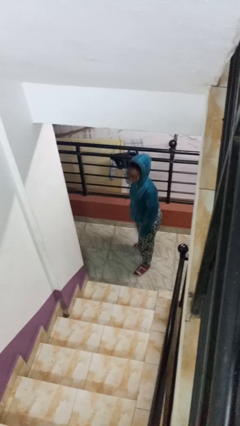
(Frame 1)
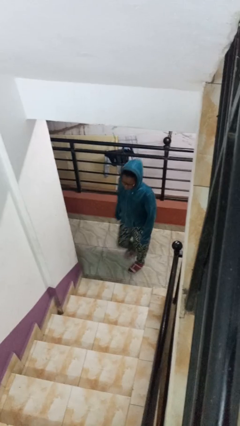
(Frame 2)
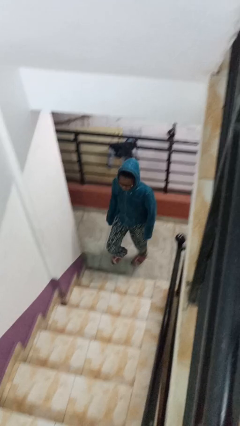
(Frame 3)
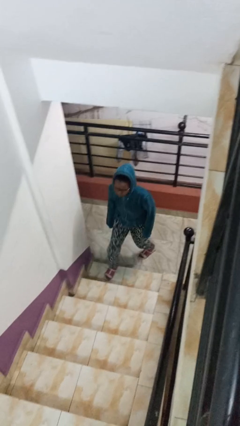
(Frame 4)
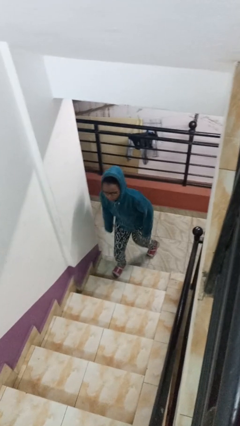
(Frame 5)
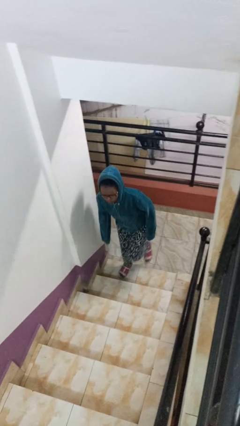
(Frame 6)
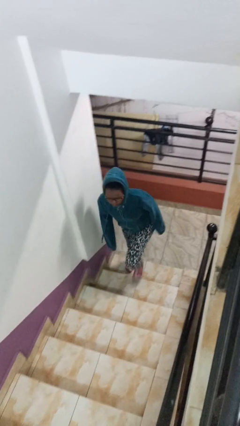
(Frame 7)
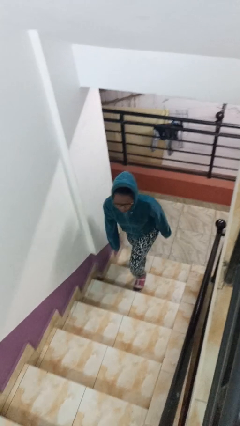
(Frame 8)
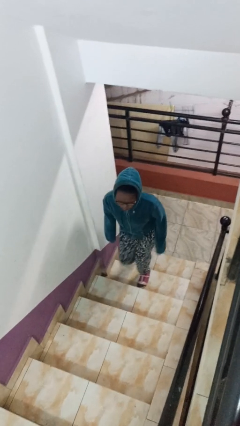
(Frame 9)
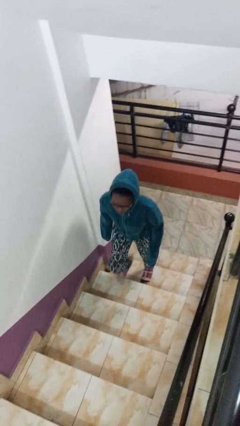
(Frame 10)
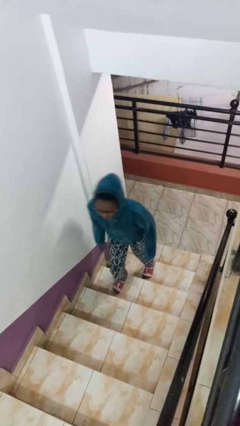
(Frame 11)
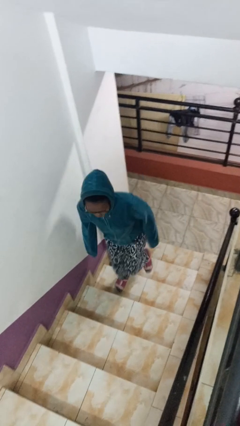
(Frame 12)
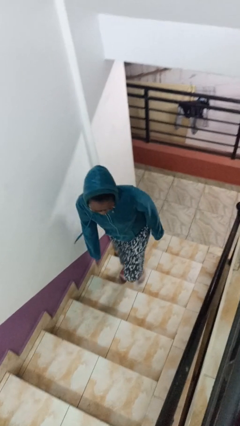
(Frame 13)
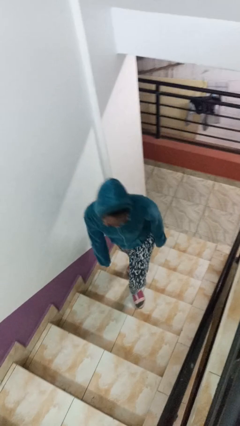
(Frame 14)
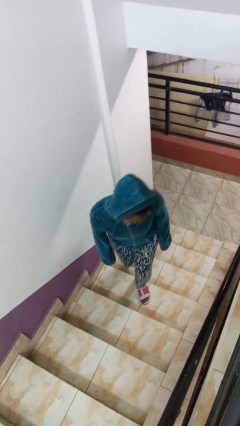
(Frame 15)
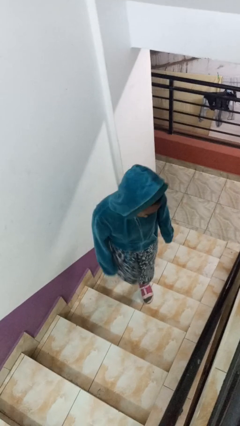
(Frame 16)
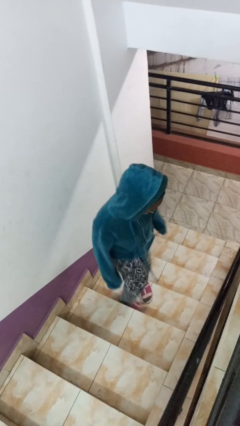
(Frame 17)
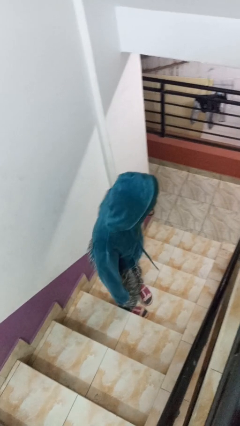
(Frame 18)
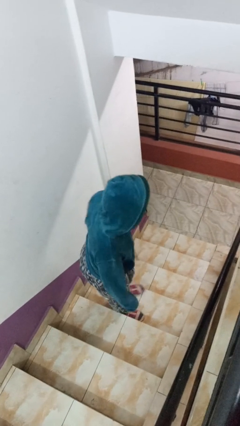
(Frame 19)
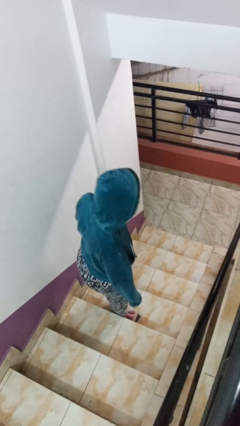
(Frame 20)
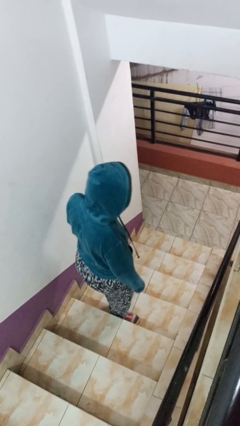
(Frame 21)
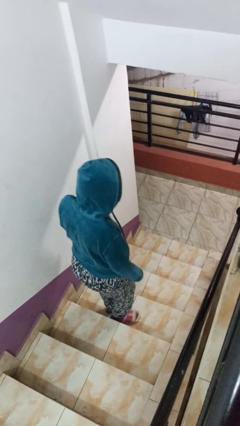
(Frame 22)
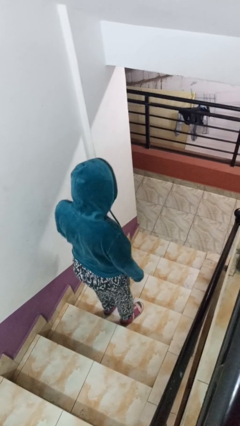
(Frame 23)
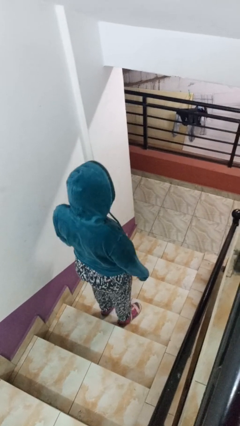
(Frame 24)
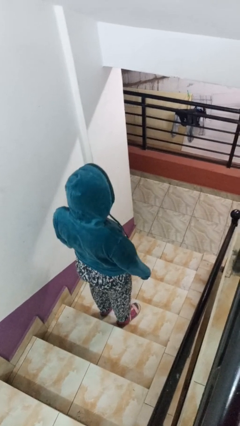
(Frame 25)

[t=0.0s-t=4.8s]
person climbs up stairs

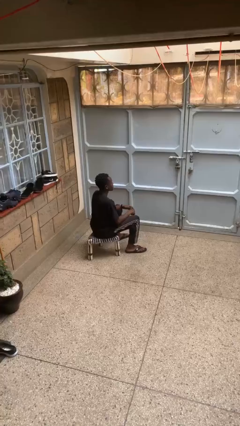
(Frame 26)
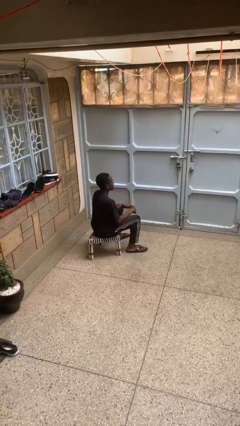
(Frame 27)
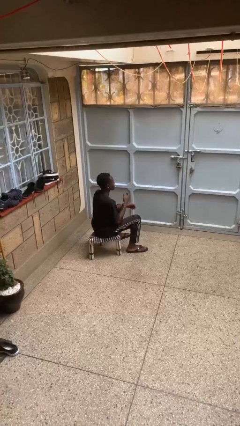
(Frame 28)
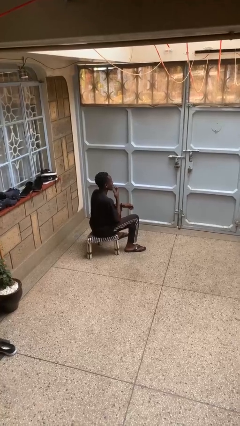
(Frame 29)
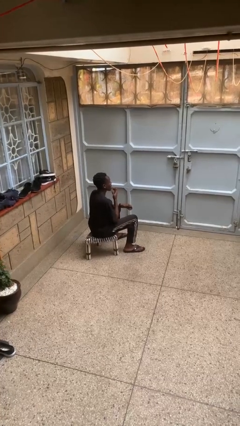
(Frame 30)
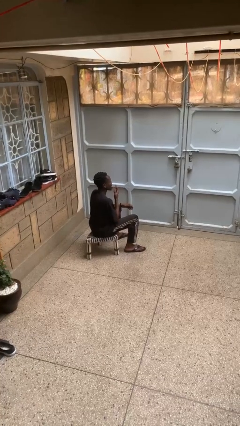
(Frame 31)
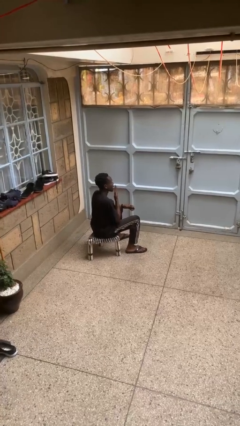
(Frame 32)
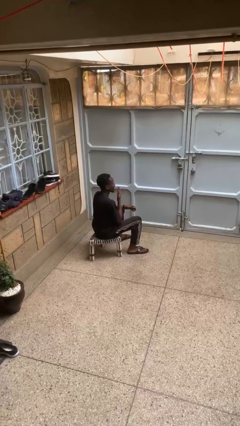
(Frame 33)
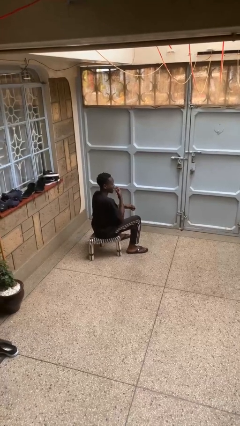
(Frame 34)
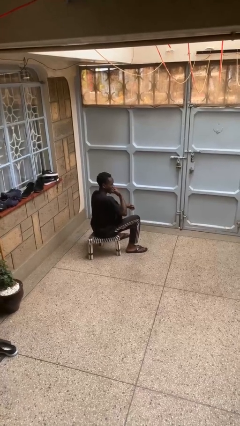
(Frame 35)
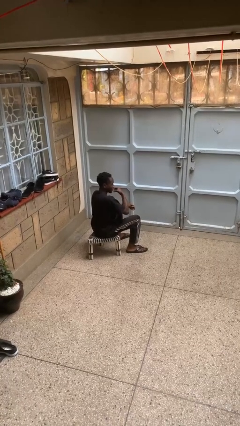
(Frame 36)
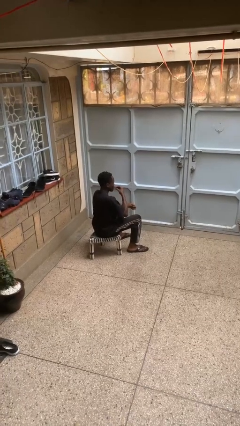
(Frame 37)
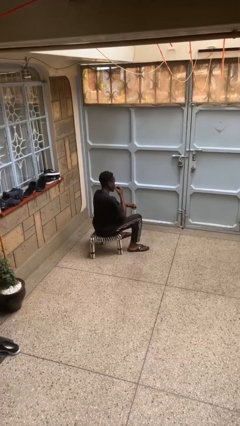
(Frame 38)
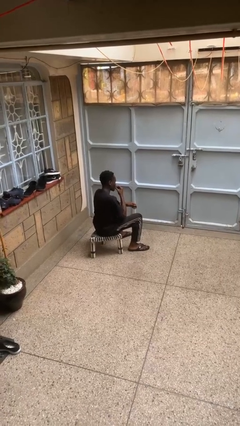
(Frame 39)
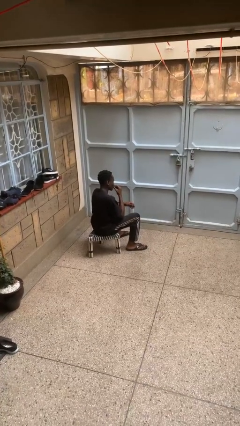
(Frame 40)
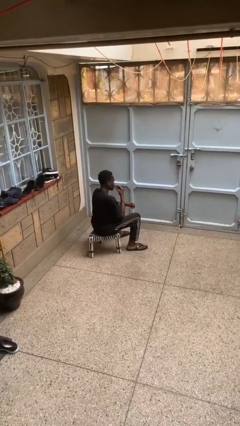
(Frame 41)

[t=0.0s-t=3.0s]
person licks fingers

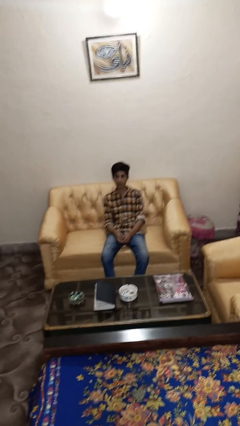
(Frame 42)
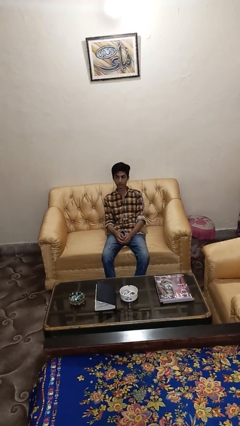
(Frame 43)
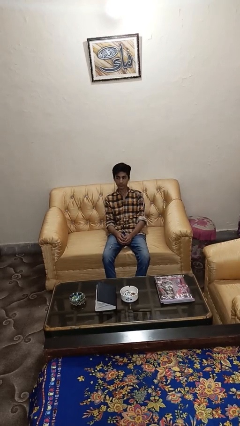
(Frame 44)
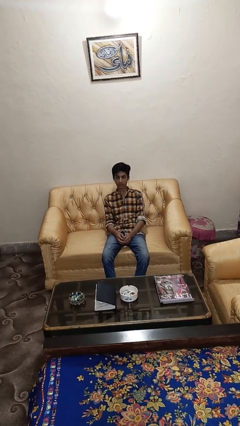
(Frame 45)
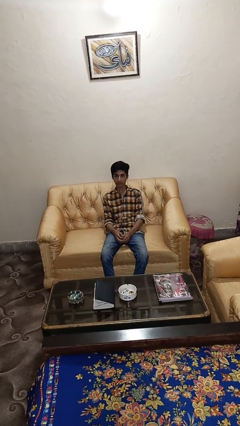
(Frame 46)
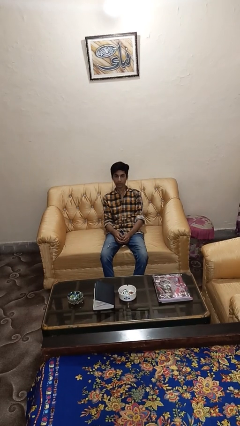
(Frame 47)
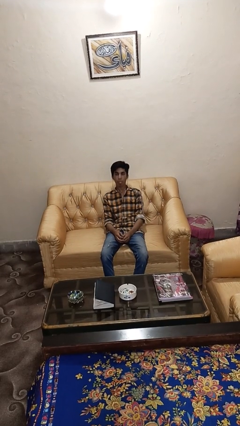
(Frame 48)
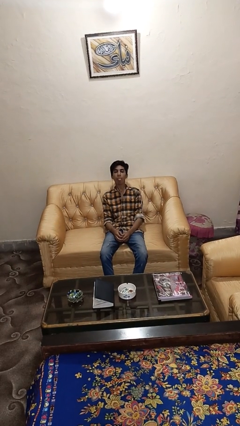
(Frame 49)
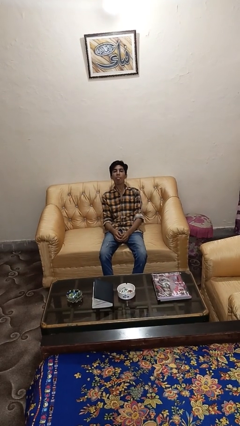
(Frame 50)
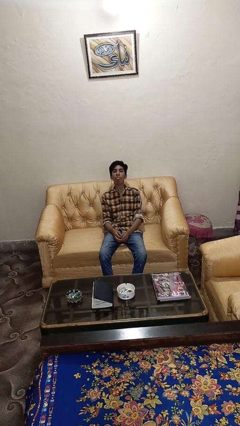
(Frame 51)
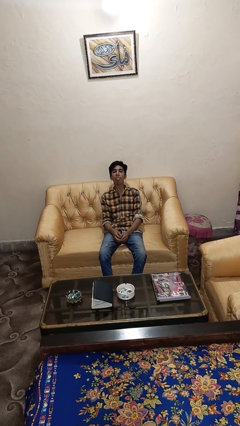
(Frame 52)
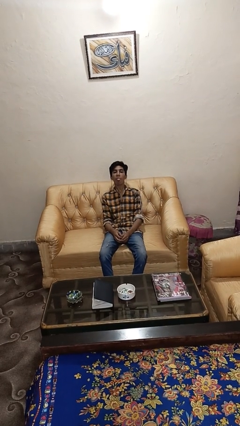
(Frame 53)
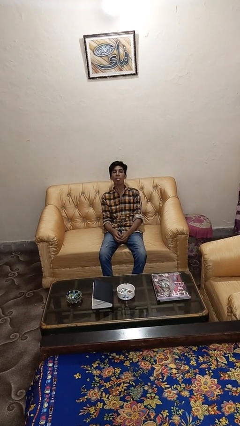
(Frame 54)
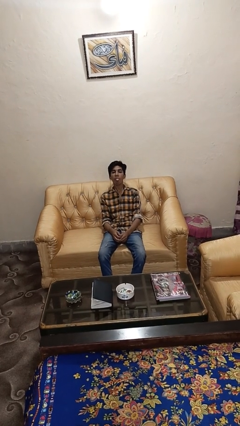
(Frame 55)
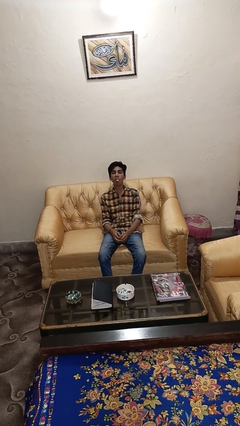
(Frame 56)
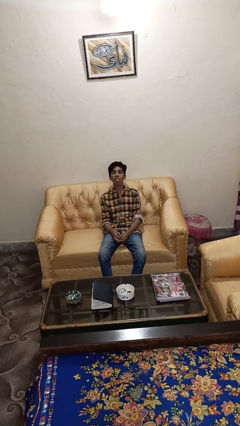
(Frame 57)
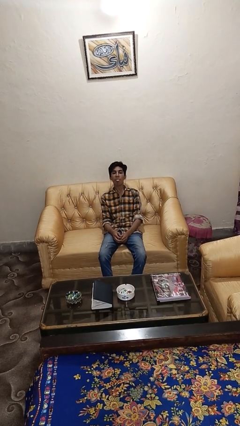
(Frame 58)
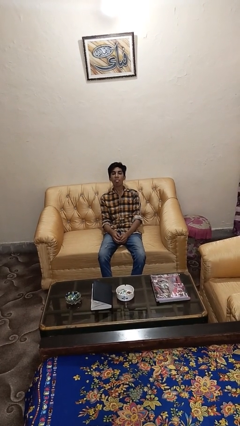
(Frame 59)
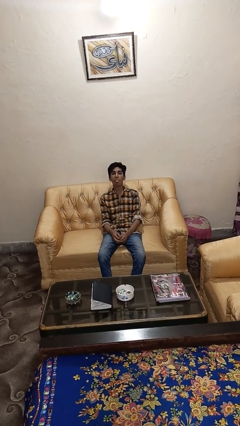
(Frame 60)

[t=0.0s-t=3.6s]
person sticks out tongue

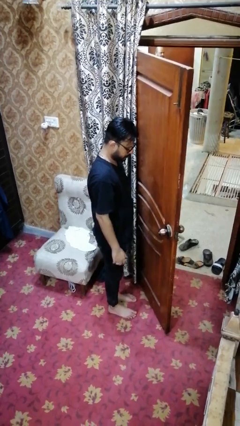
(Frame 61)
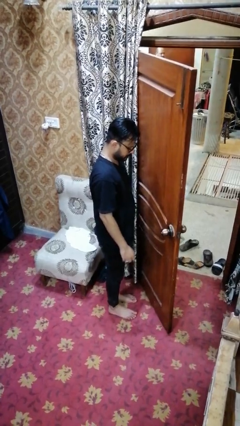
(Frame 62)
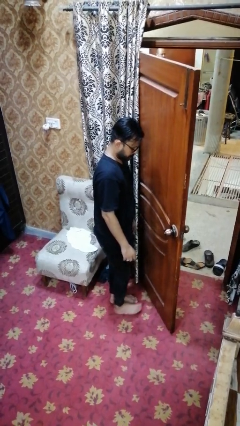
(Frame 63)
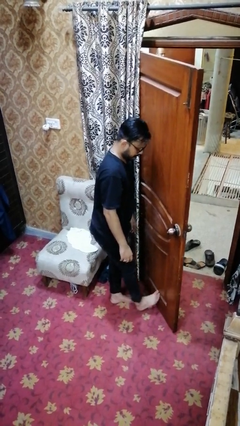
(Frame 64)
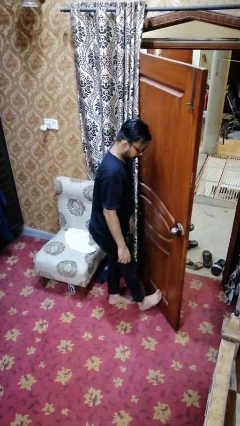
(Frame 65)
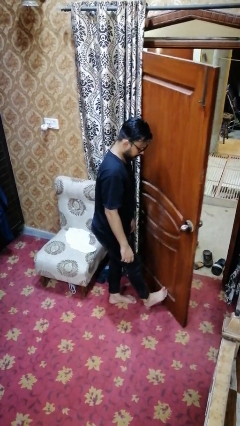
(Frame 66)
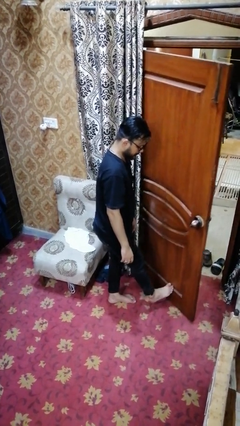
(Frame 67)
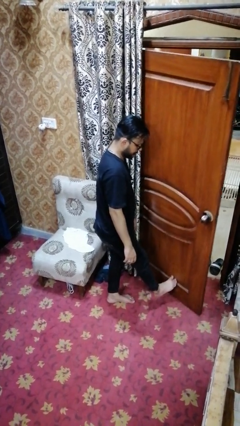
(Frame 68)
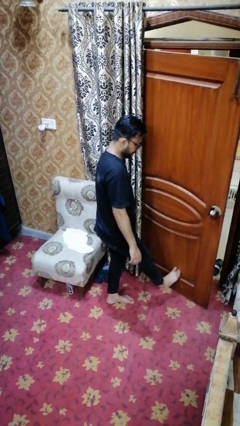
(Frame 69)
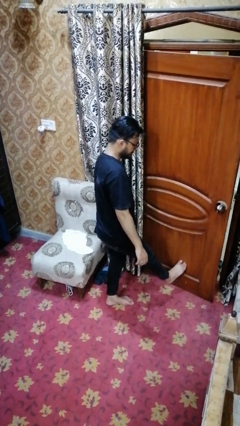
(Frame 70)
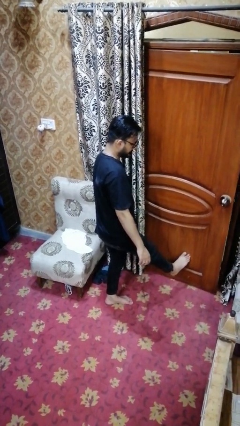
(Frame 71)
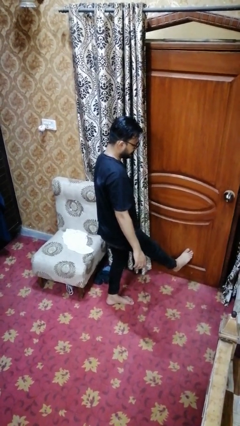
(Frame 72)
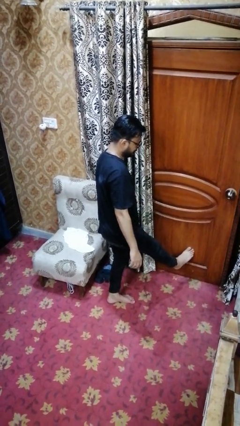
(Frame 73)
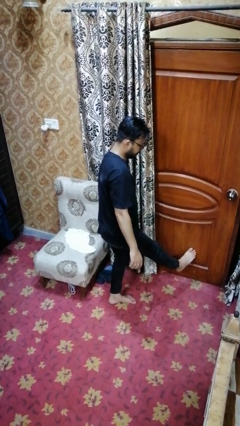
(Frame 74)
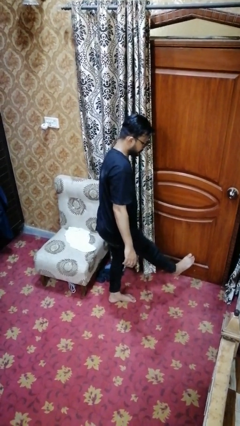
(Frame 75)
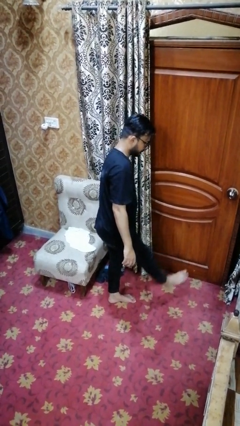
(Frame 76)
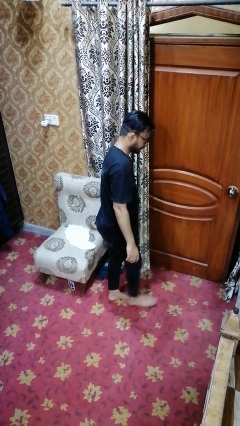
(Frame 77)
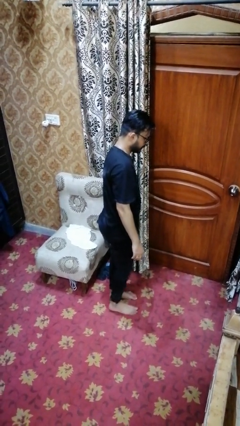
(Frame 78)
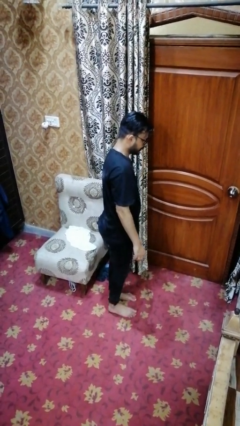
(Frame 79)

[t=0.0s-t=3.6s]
person closes door with foot

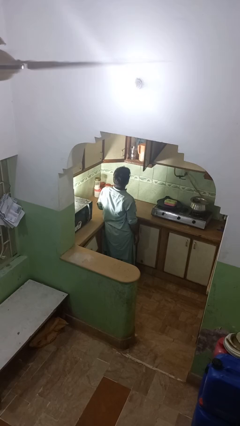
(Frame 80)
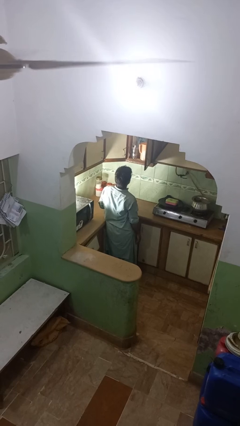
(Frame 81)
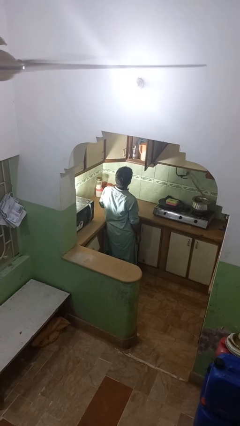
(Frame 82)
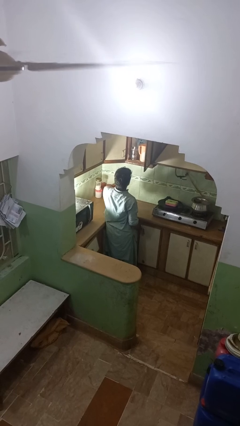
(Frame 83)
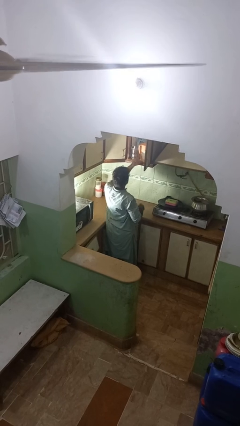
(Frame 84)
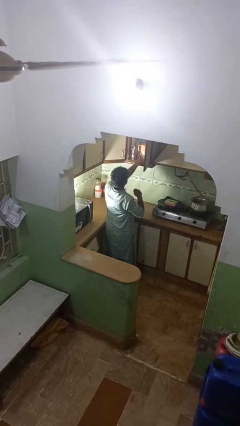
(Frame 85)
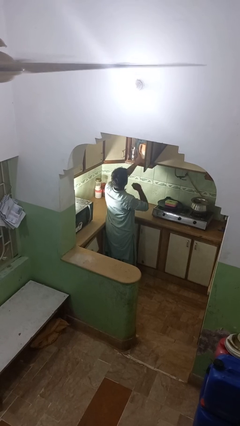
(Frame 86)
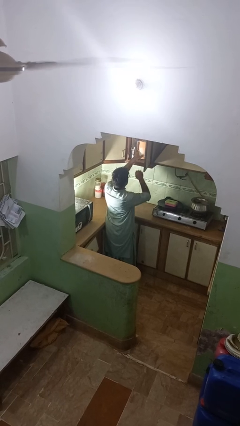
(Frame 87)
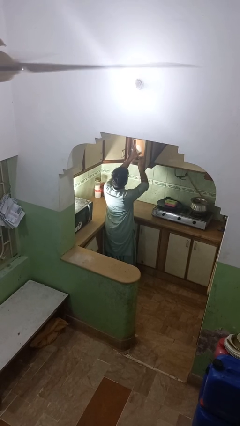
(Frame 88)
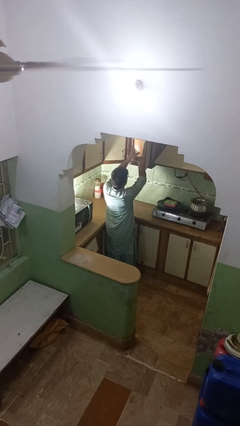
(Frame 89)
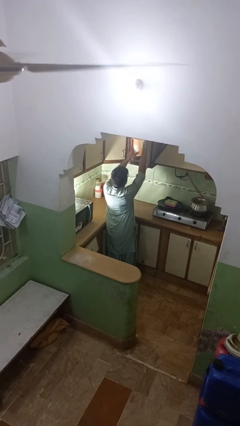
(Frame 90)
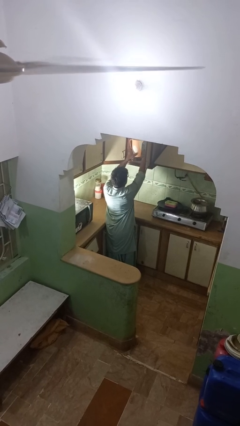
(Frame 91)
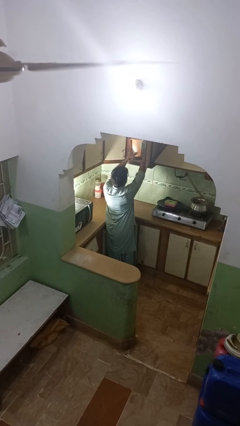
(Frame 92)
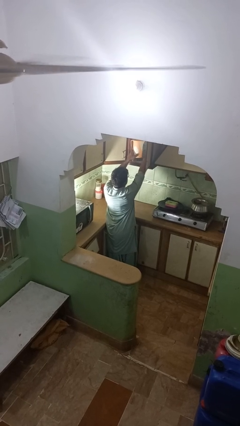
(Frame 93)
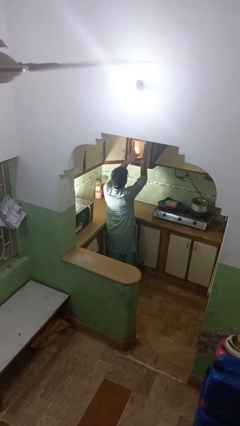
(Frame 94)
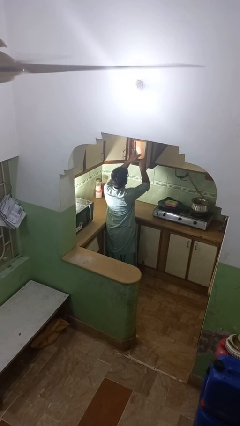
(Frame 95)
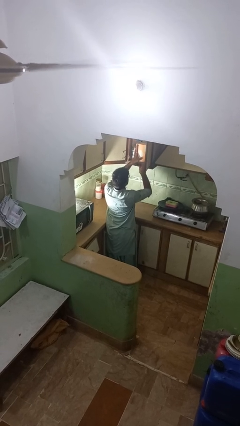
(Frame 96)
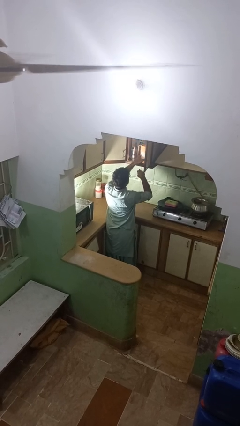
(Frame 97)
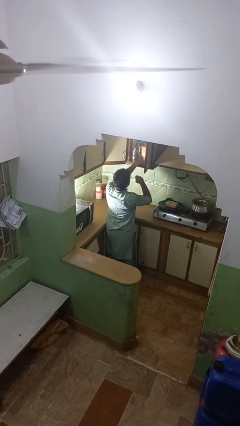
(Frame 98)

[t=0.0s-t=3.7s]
person searches in kitchen drawer
